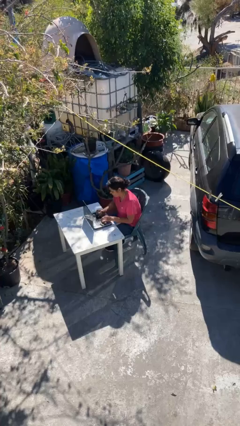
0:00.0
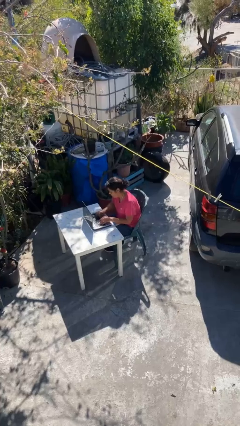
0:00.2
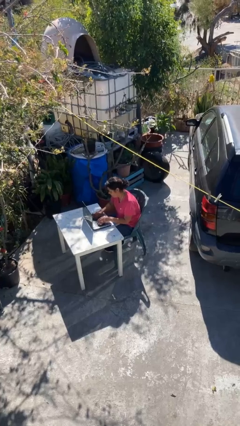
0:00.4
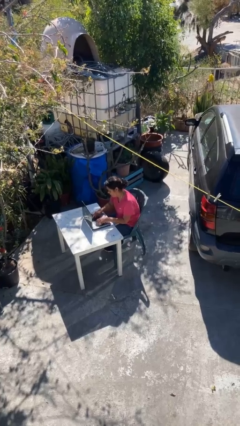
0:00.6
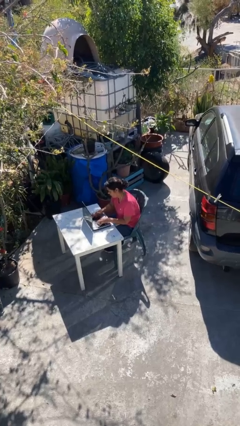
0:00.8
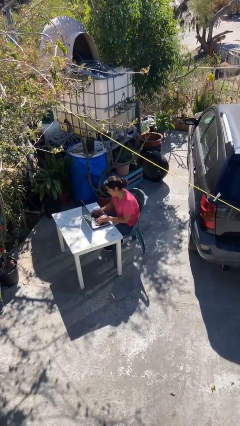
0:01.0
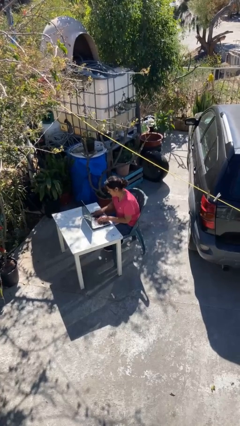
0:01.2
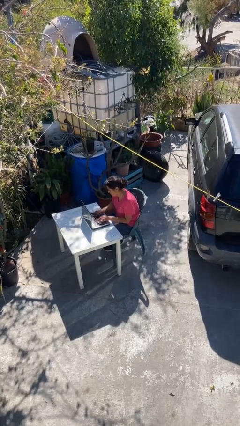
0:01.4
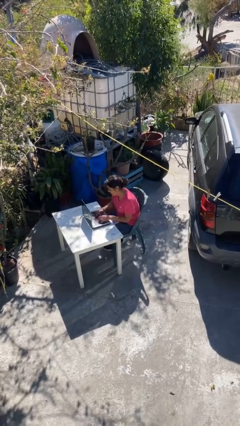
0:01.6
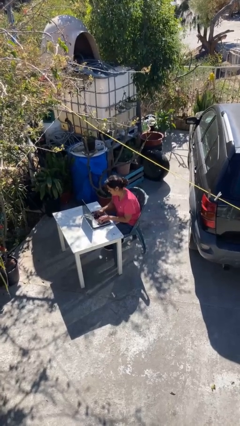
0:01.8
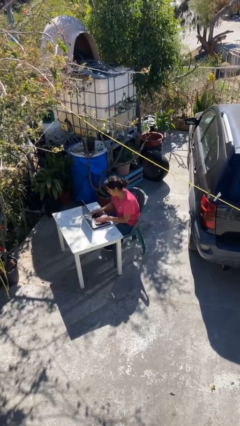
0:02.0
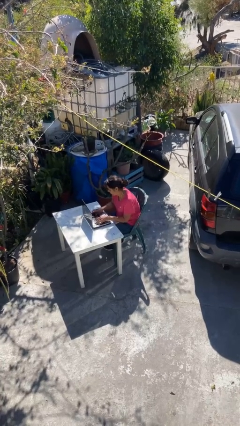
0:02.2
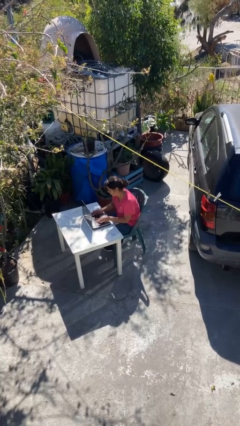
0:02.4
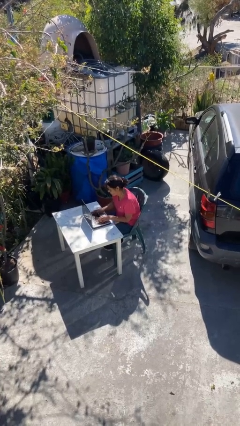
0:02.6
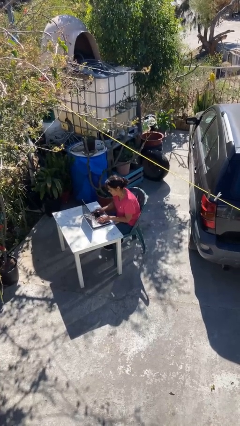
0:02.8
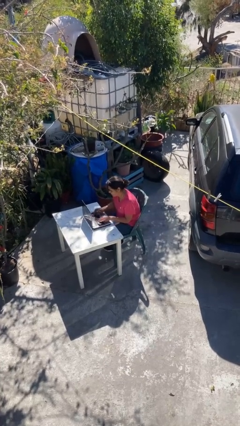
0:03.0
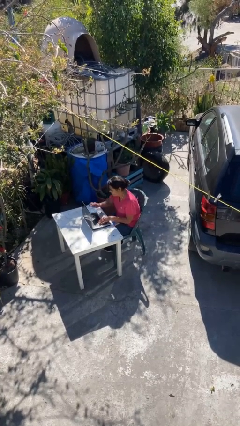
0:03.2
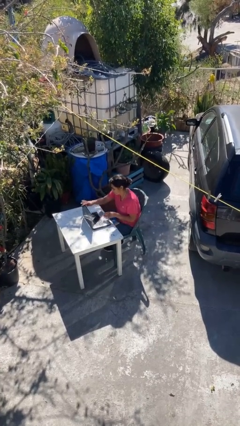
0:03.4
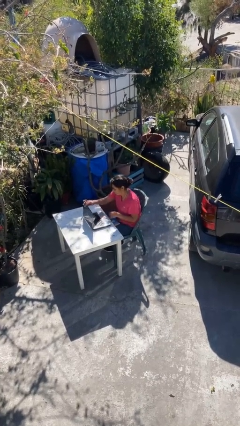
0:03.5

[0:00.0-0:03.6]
person interacts with laptop

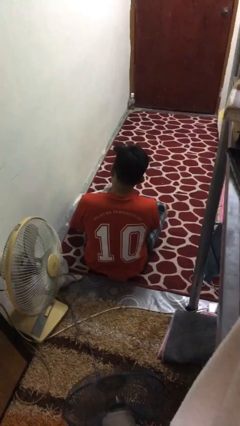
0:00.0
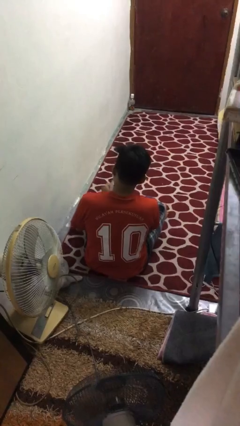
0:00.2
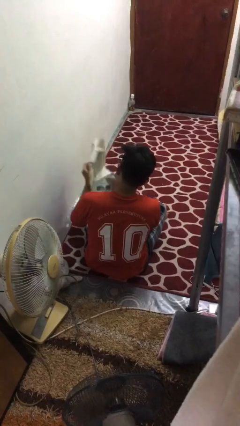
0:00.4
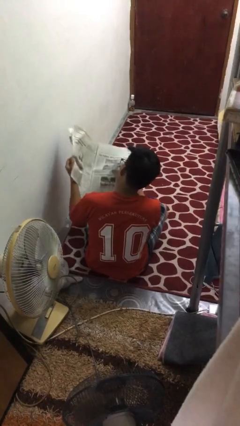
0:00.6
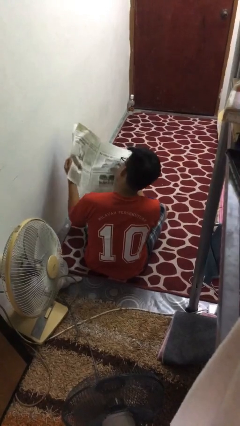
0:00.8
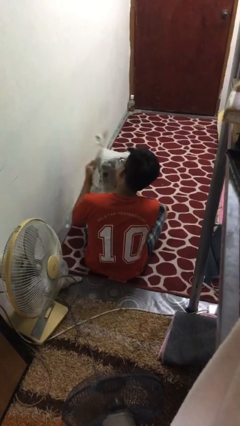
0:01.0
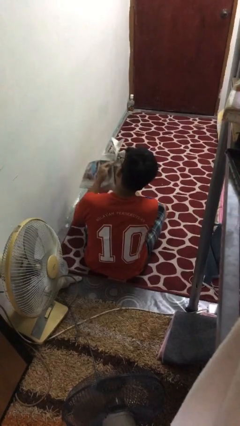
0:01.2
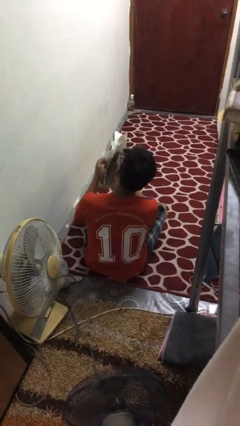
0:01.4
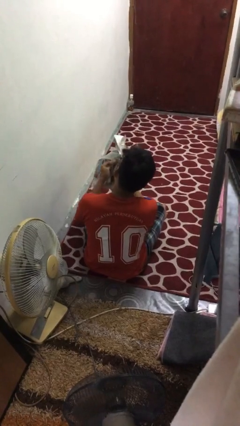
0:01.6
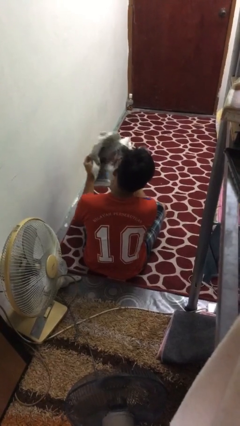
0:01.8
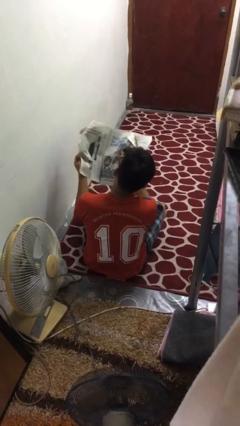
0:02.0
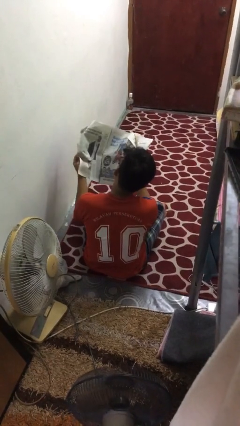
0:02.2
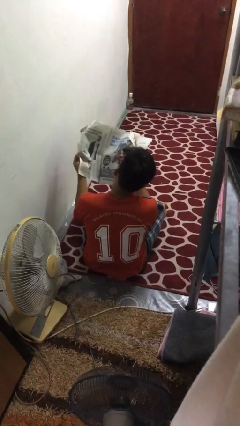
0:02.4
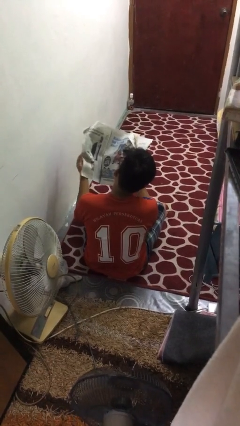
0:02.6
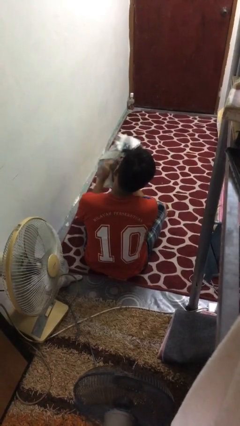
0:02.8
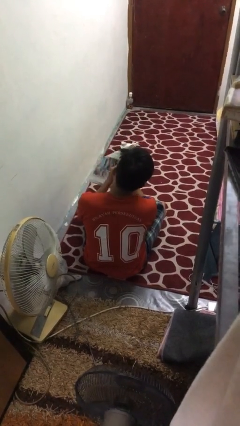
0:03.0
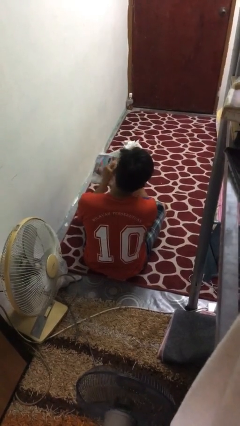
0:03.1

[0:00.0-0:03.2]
person reads newspaper

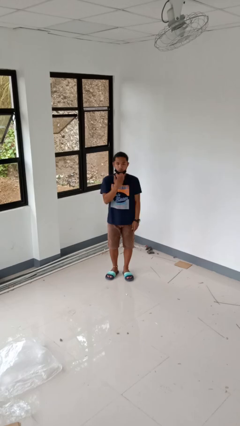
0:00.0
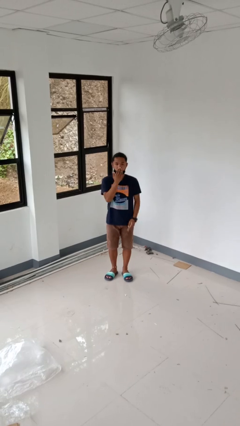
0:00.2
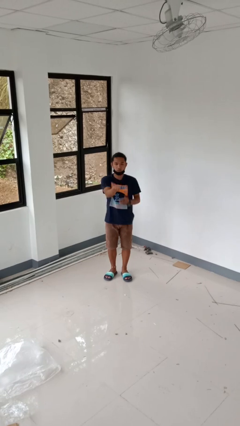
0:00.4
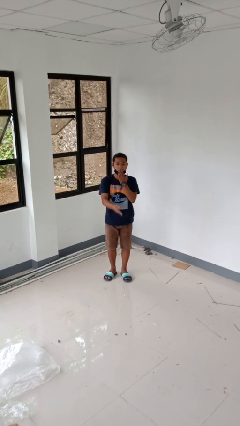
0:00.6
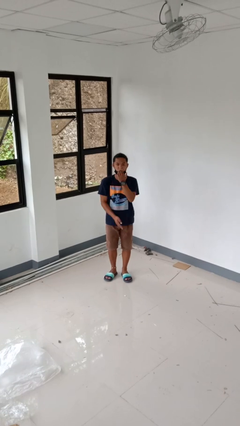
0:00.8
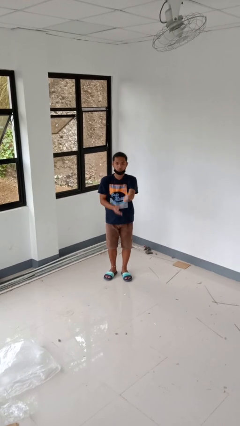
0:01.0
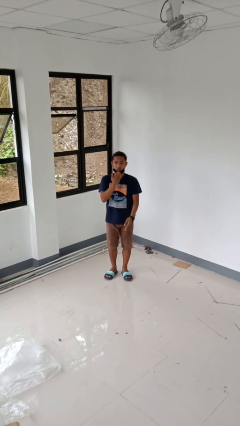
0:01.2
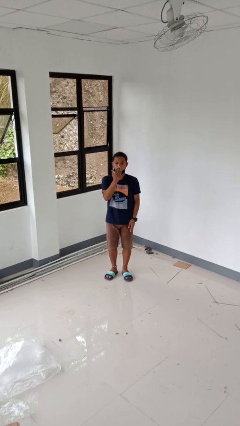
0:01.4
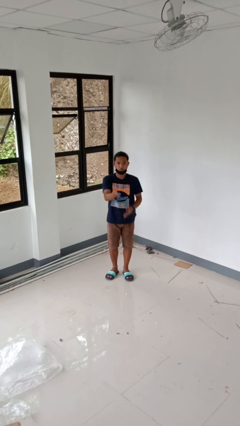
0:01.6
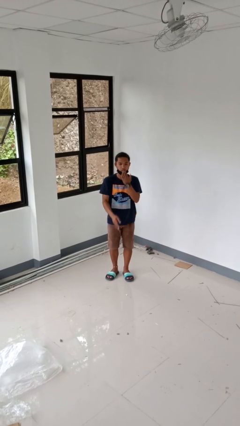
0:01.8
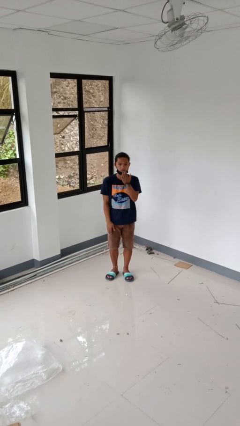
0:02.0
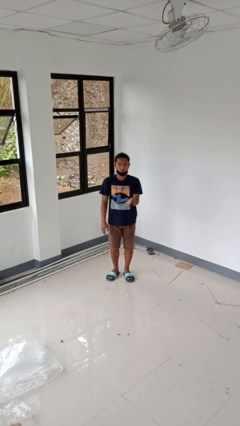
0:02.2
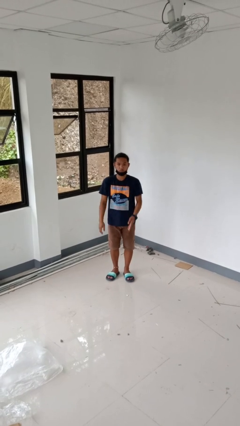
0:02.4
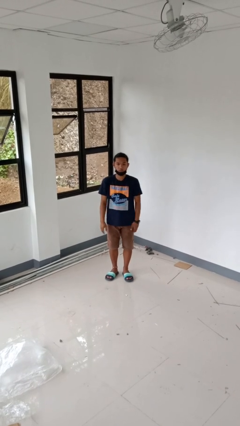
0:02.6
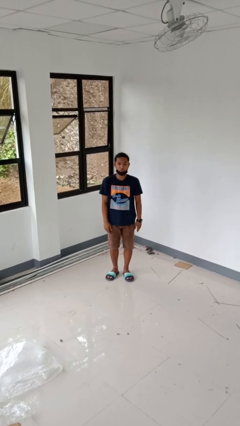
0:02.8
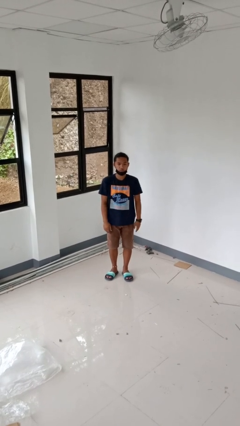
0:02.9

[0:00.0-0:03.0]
person gestures blow kiss

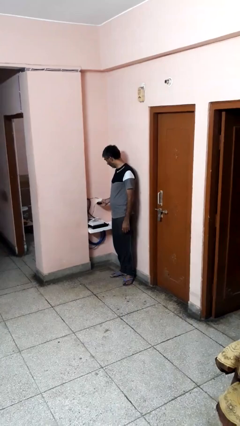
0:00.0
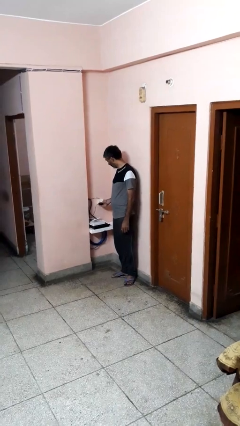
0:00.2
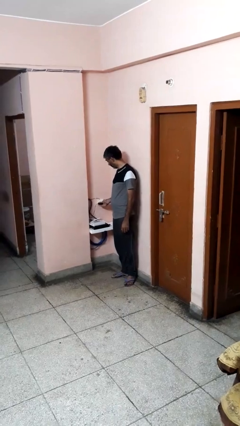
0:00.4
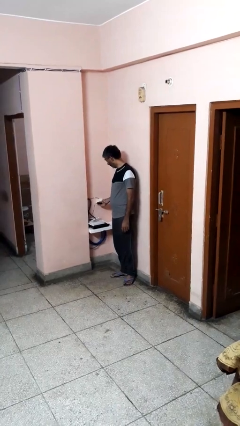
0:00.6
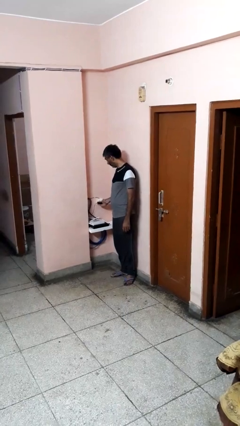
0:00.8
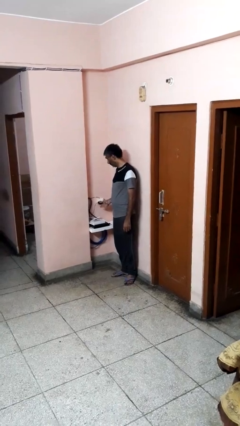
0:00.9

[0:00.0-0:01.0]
person plugs into electrical socket

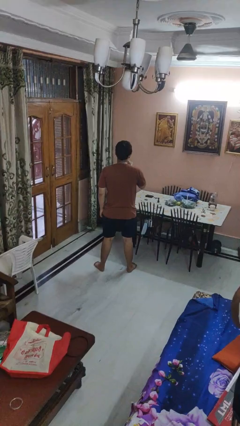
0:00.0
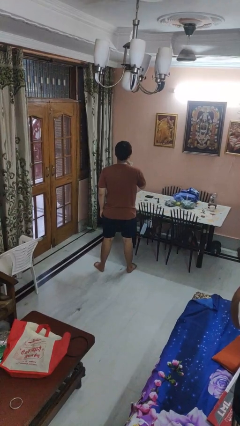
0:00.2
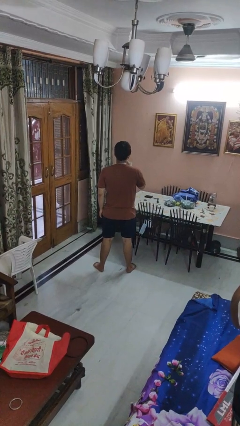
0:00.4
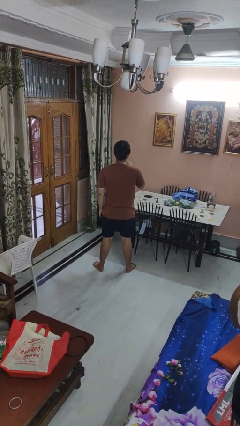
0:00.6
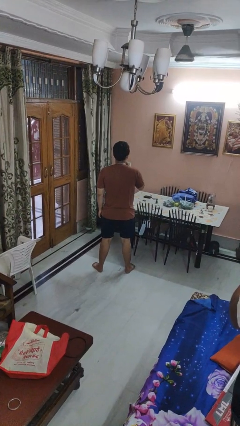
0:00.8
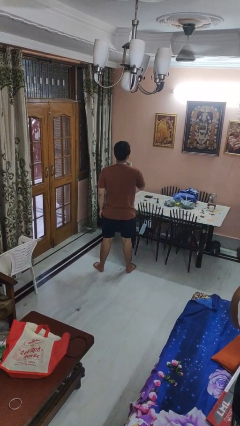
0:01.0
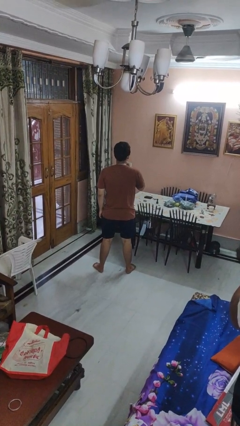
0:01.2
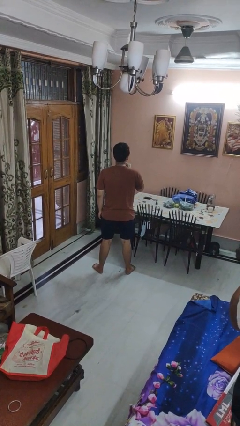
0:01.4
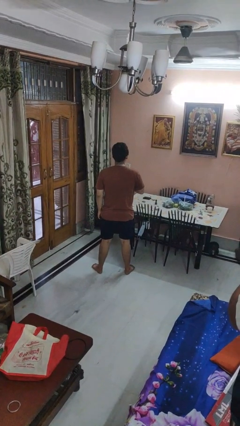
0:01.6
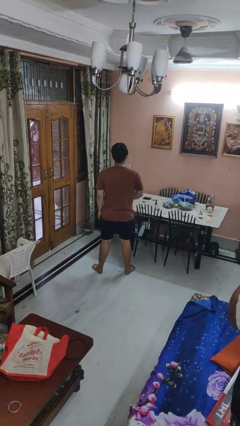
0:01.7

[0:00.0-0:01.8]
person strokes chin

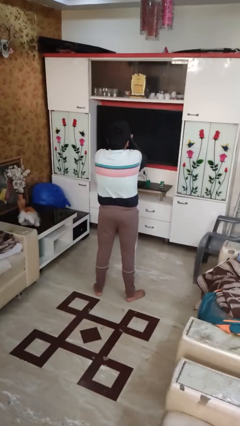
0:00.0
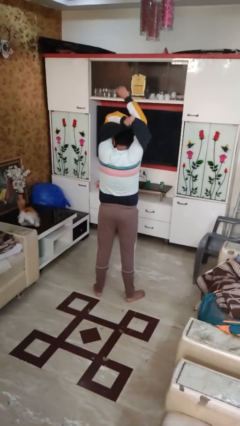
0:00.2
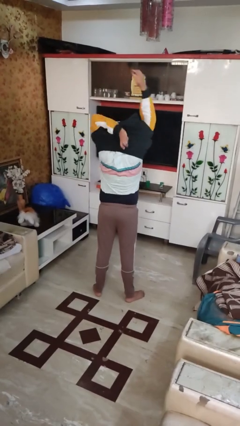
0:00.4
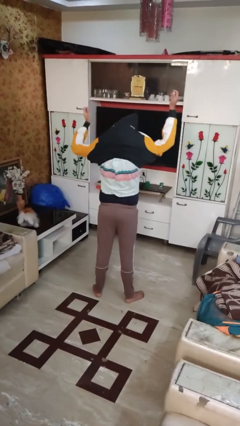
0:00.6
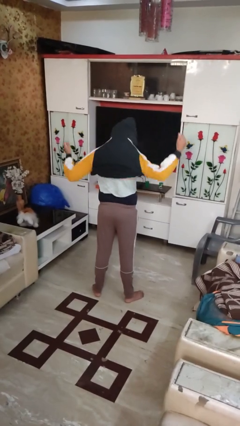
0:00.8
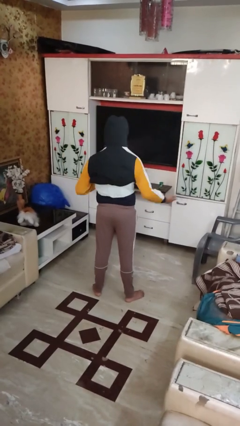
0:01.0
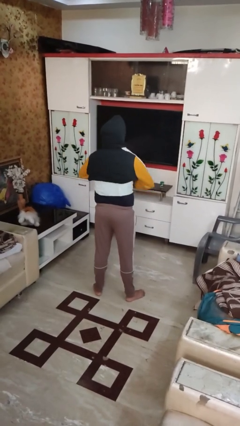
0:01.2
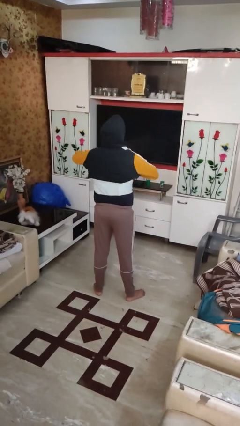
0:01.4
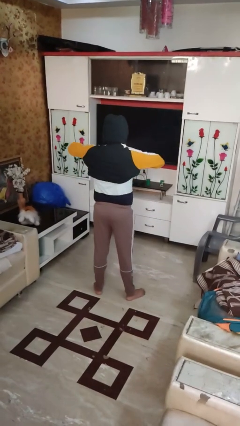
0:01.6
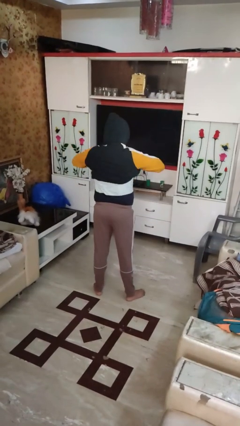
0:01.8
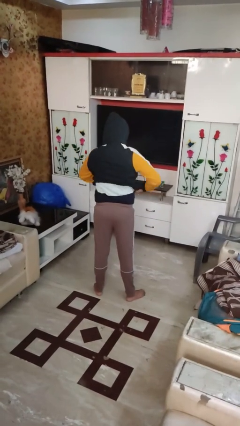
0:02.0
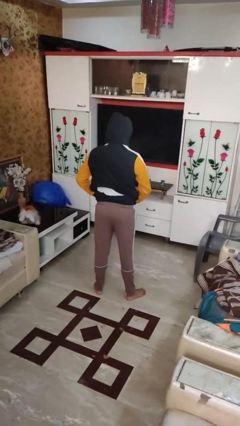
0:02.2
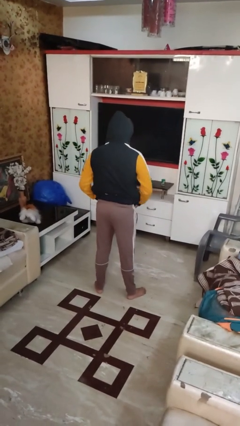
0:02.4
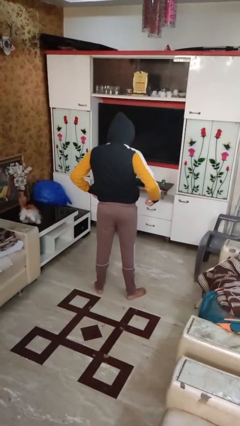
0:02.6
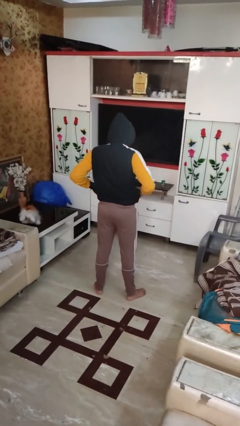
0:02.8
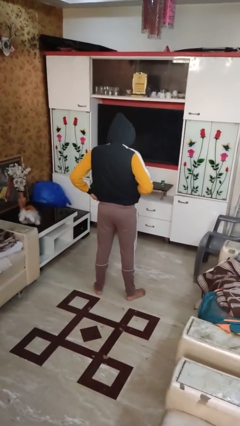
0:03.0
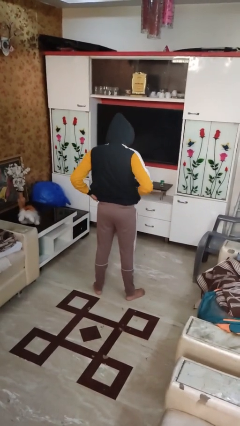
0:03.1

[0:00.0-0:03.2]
person puts on hoodie

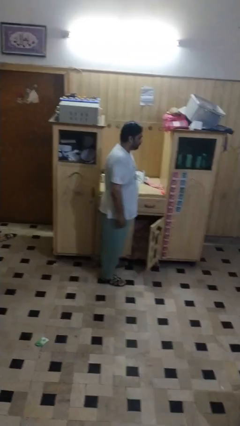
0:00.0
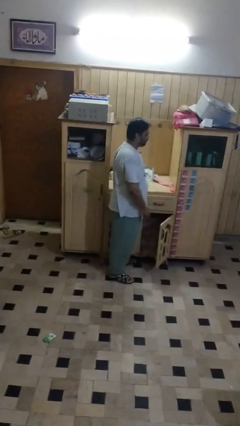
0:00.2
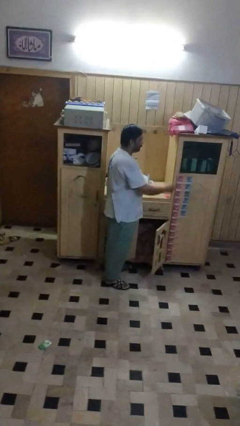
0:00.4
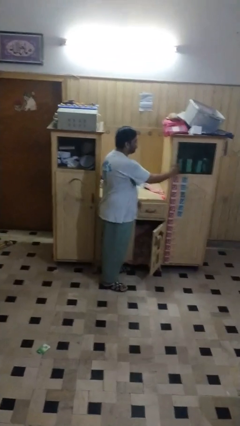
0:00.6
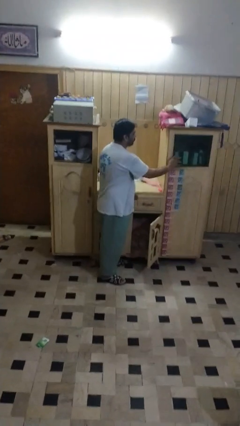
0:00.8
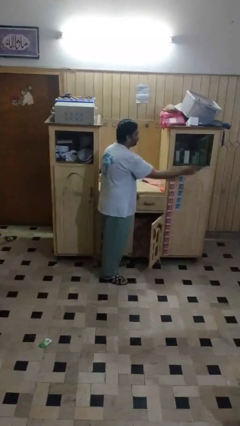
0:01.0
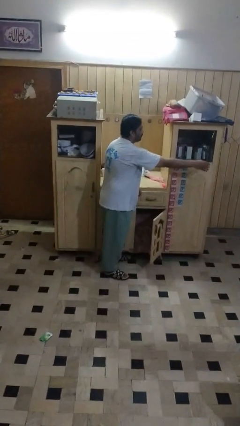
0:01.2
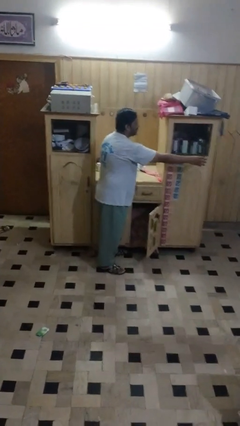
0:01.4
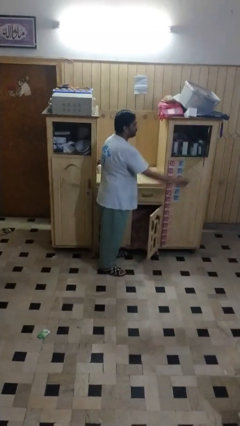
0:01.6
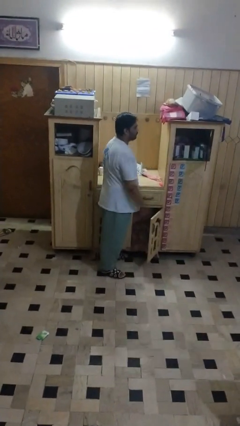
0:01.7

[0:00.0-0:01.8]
person closes cabinet
